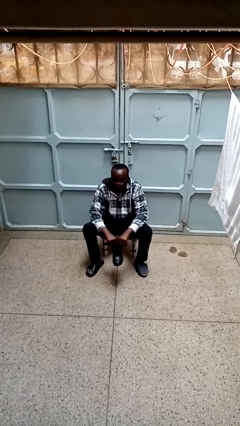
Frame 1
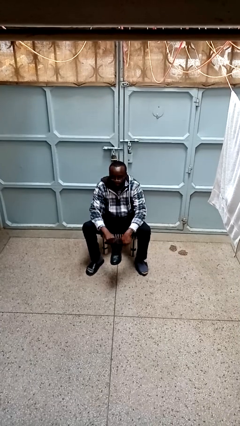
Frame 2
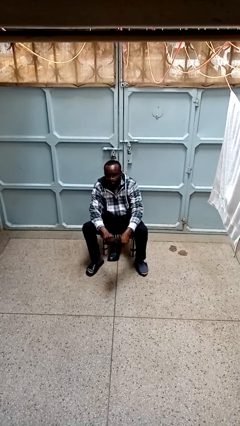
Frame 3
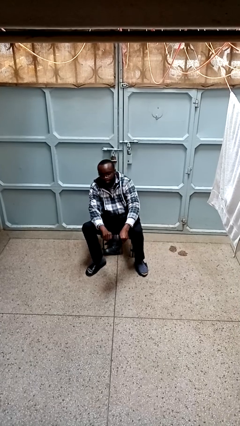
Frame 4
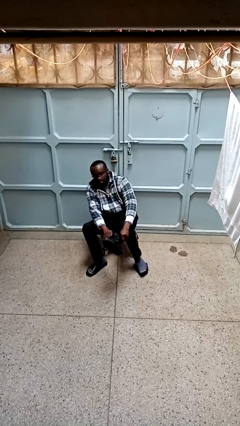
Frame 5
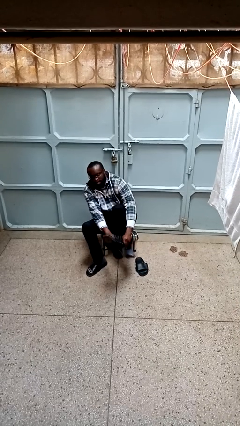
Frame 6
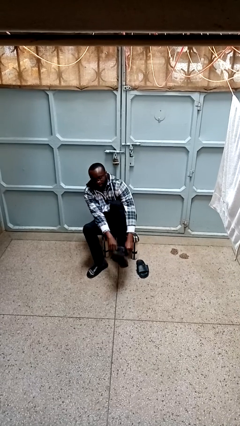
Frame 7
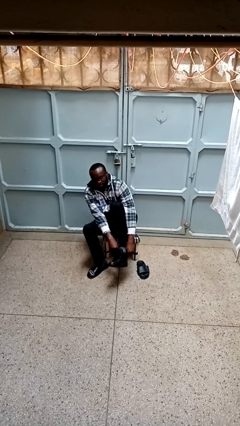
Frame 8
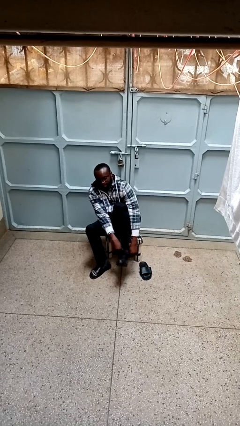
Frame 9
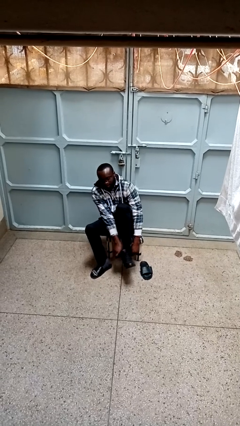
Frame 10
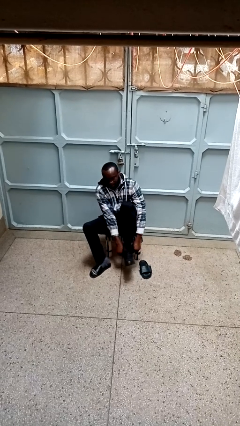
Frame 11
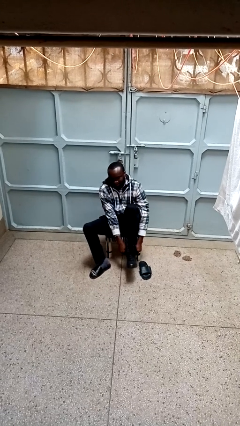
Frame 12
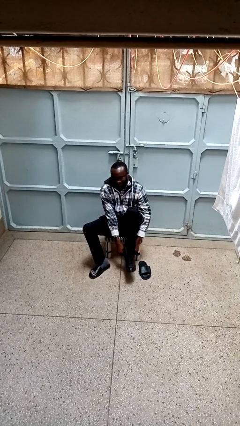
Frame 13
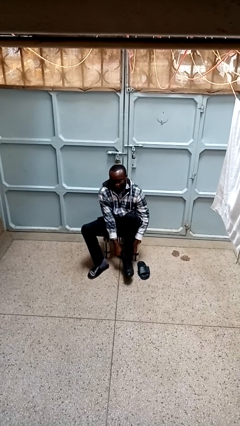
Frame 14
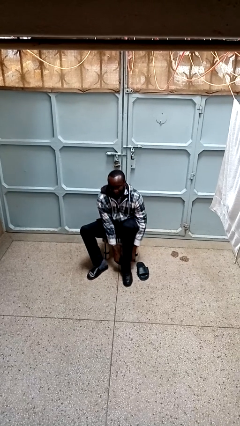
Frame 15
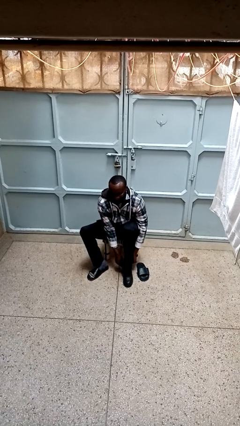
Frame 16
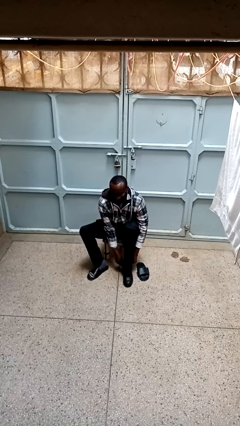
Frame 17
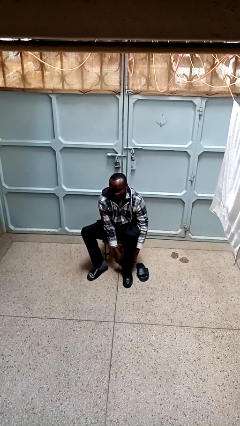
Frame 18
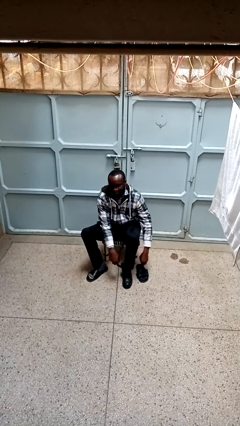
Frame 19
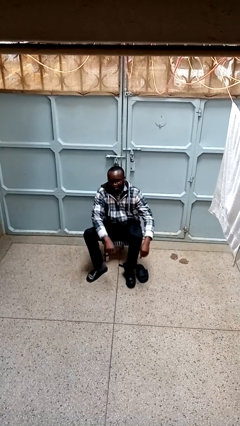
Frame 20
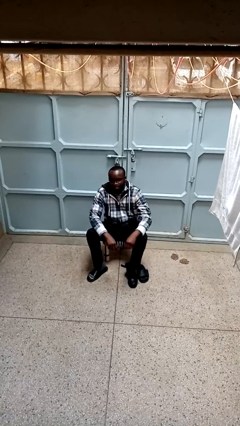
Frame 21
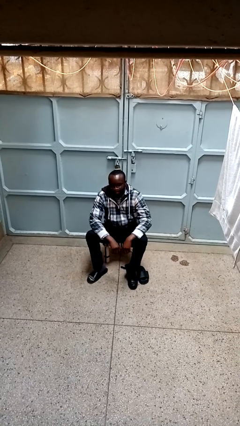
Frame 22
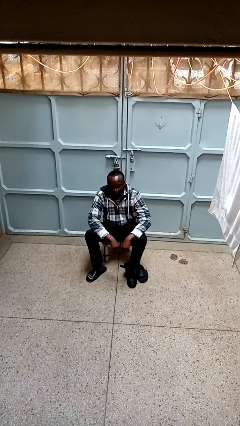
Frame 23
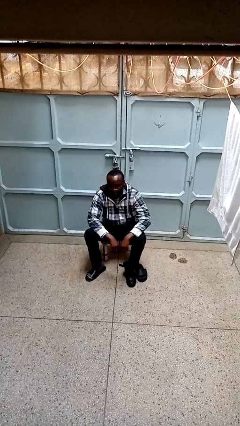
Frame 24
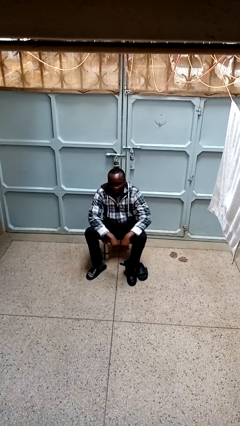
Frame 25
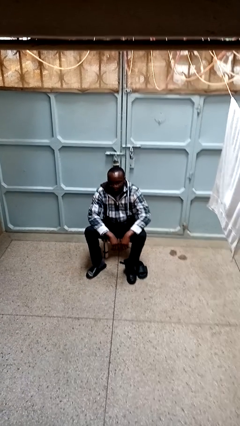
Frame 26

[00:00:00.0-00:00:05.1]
person puts on boots

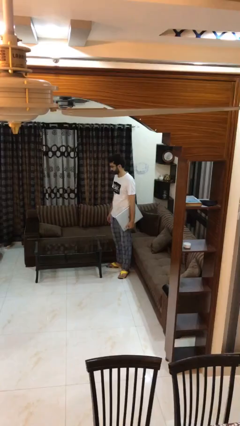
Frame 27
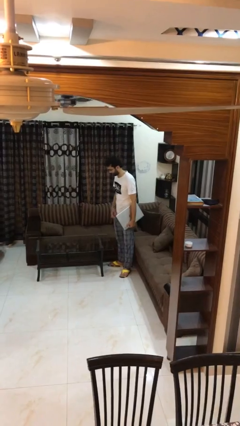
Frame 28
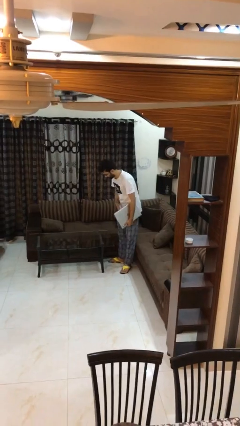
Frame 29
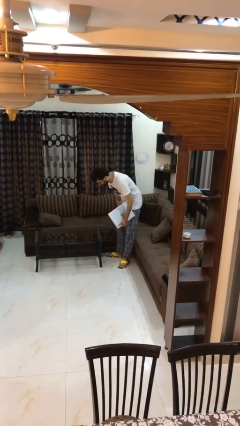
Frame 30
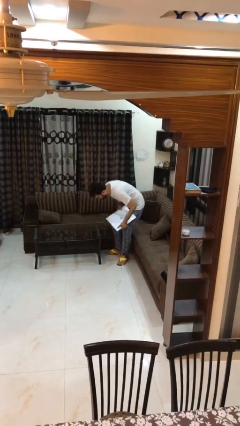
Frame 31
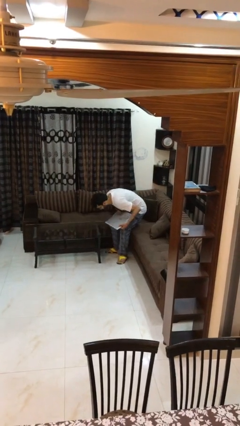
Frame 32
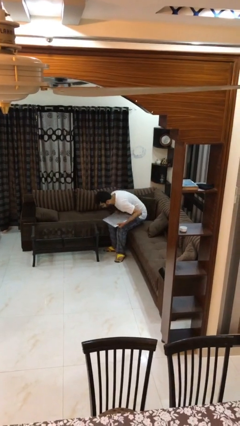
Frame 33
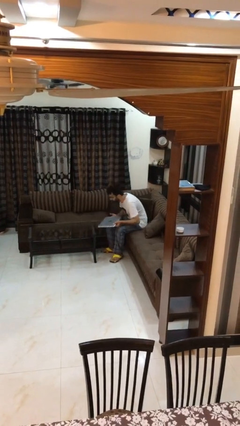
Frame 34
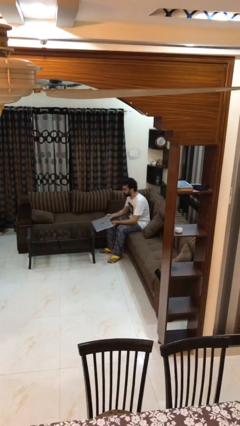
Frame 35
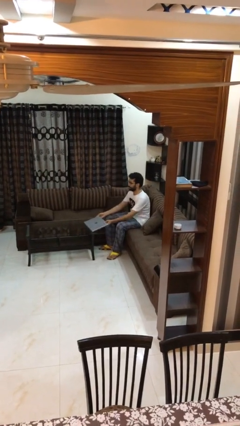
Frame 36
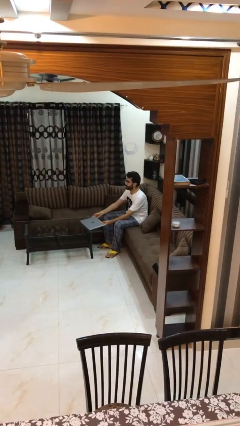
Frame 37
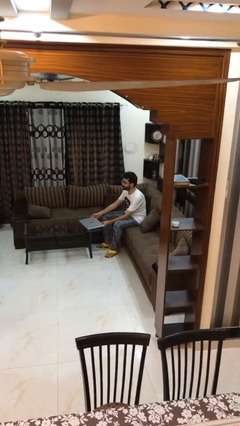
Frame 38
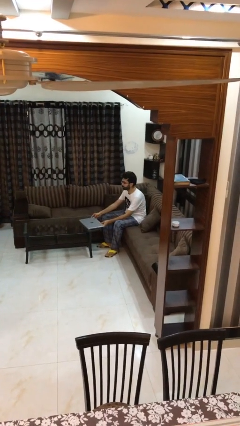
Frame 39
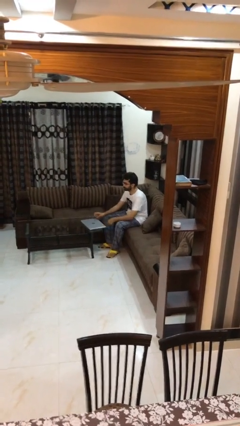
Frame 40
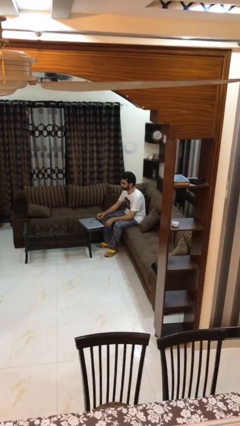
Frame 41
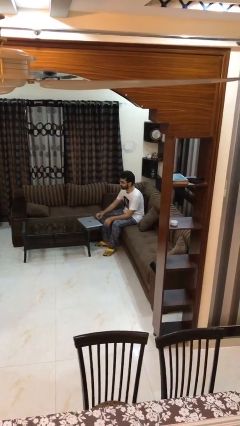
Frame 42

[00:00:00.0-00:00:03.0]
person sits down

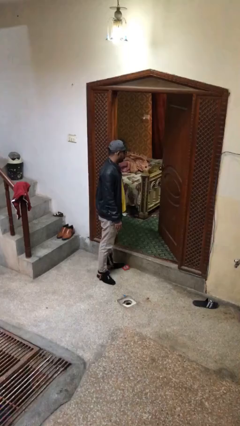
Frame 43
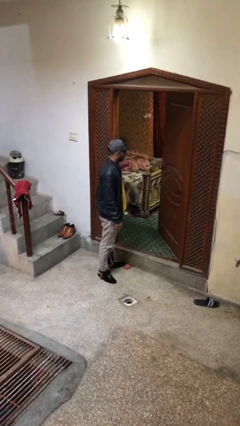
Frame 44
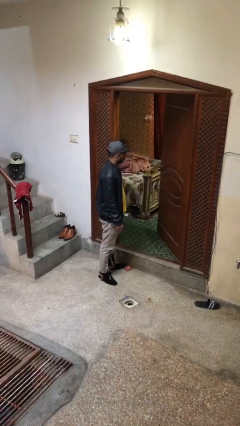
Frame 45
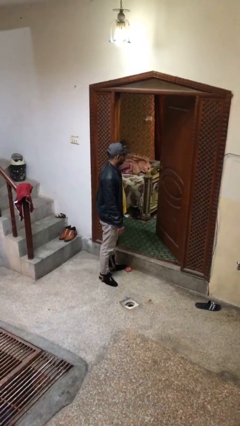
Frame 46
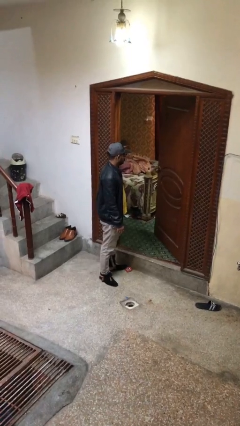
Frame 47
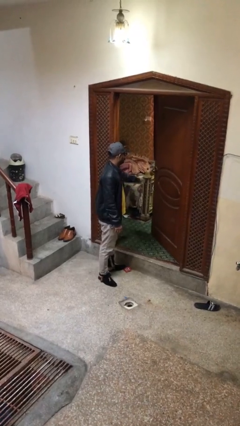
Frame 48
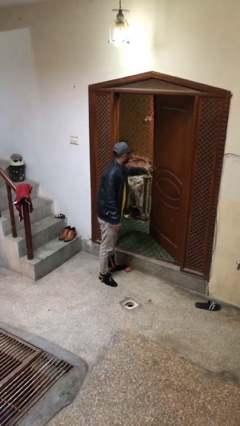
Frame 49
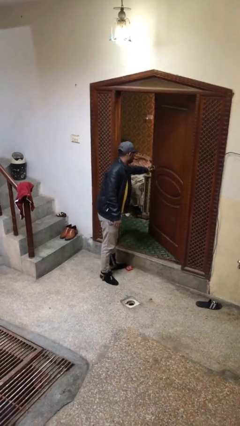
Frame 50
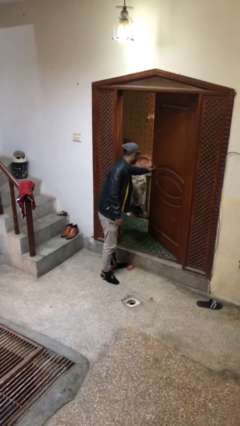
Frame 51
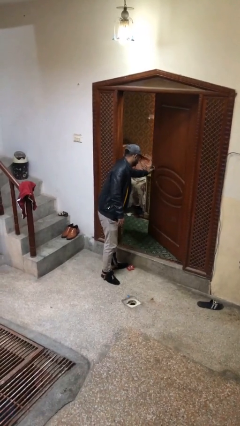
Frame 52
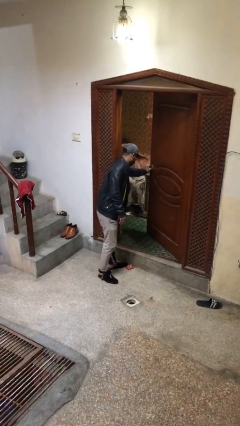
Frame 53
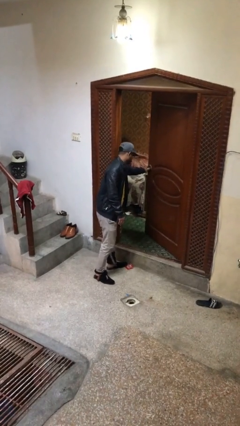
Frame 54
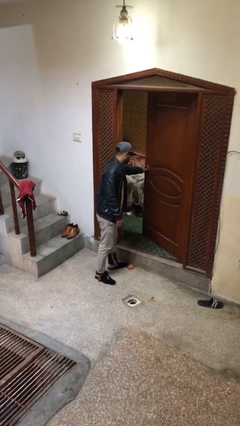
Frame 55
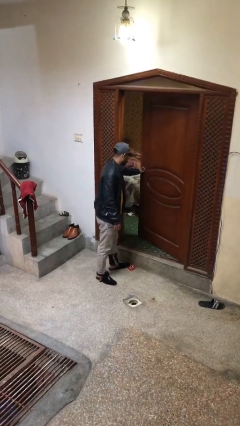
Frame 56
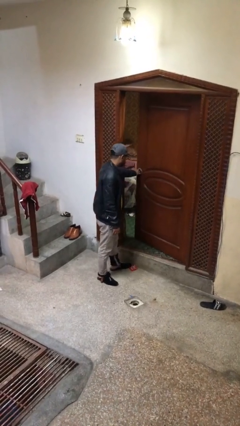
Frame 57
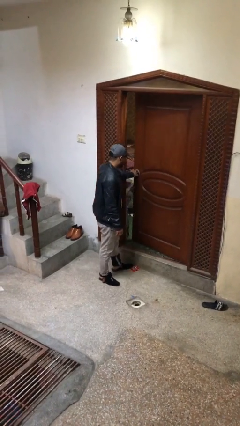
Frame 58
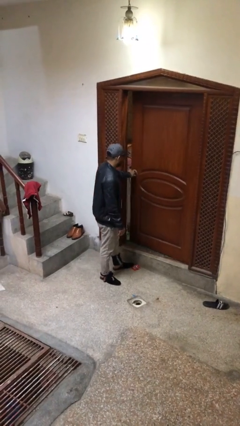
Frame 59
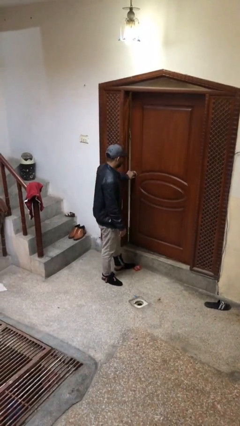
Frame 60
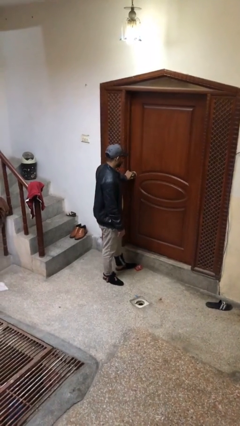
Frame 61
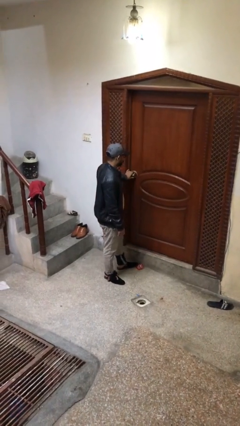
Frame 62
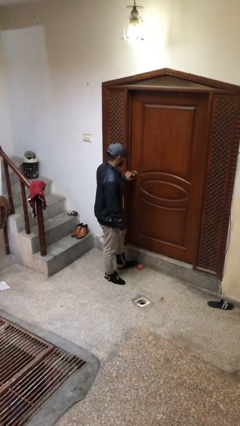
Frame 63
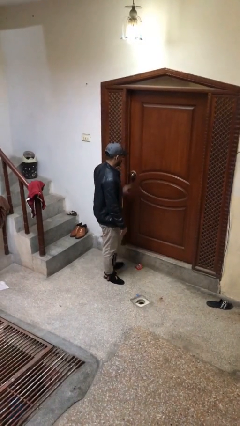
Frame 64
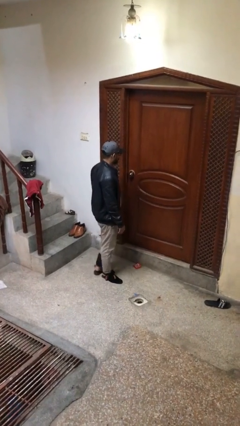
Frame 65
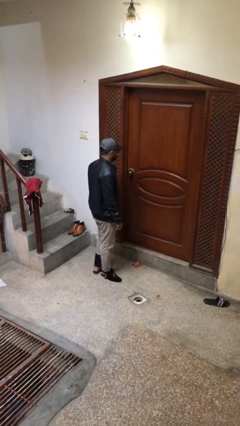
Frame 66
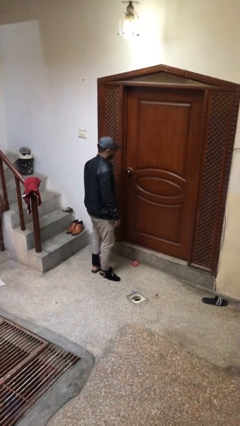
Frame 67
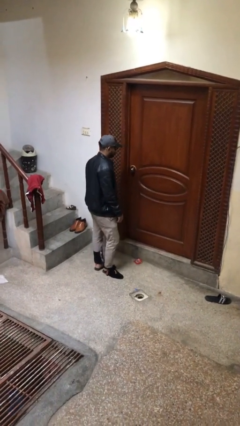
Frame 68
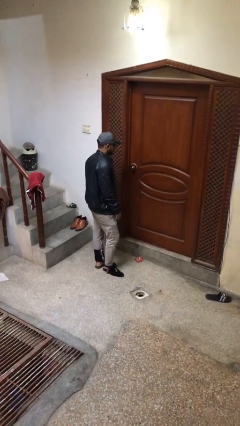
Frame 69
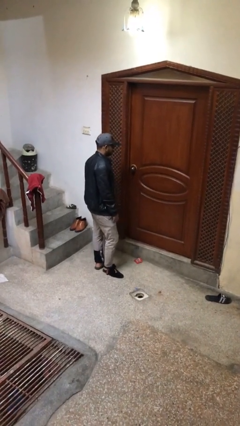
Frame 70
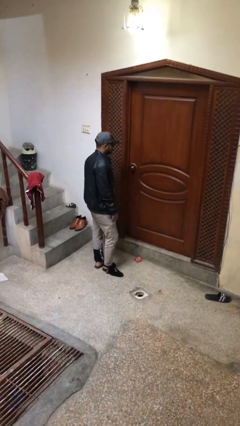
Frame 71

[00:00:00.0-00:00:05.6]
person closes facility door

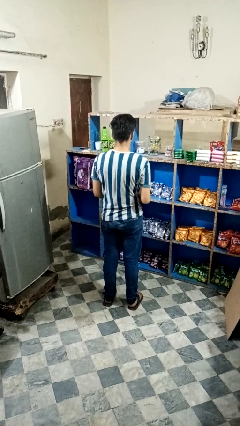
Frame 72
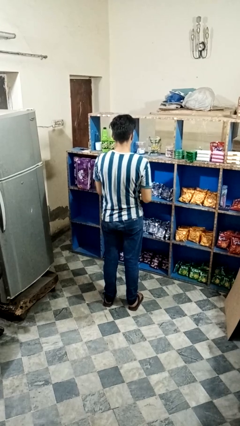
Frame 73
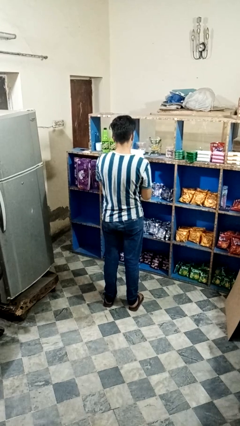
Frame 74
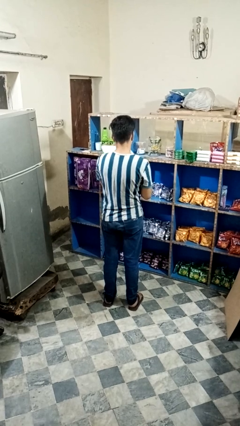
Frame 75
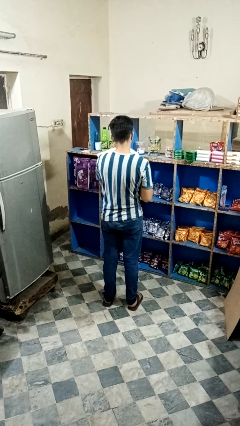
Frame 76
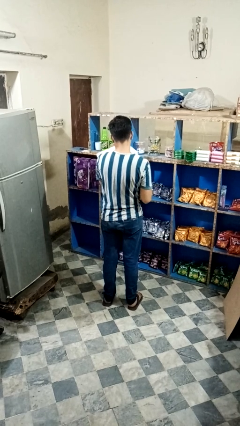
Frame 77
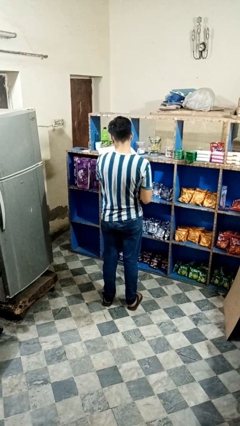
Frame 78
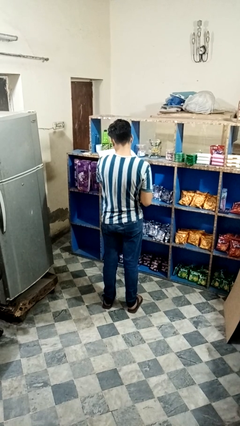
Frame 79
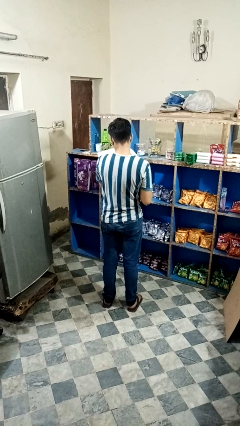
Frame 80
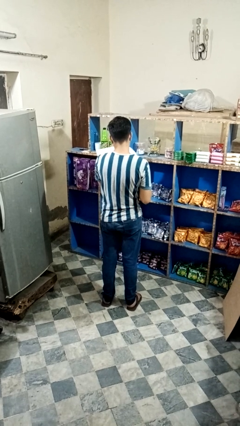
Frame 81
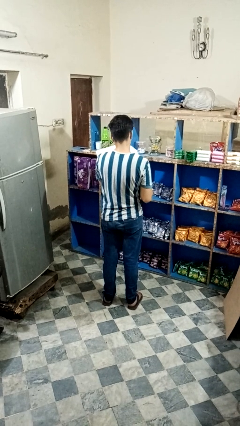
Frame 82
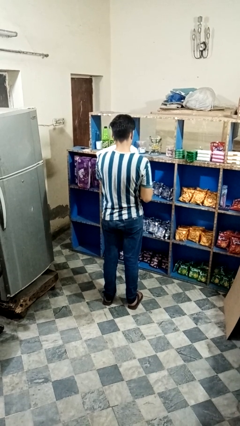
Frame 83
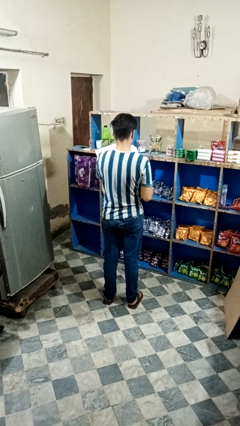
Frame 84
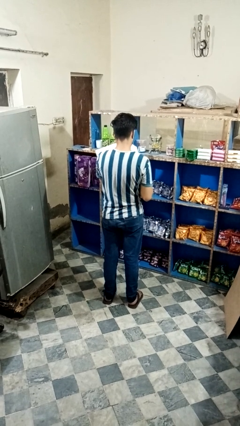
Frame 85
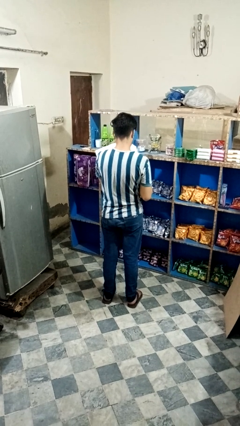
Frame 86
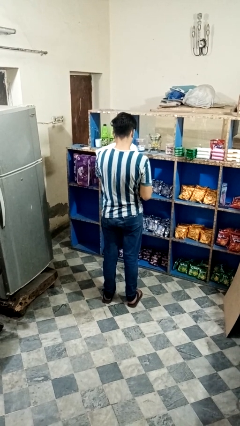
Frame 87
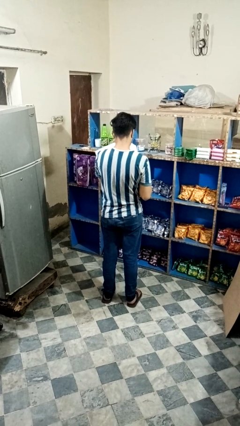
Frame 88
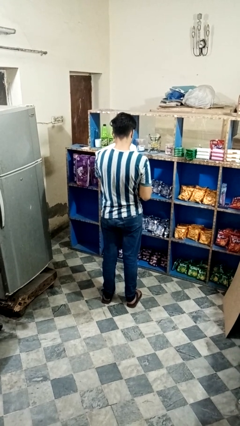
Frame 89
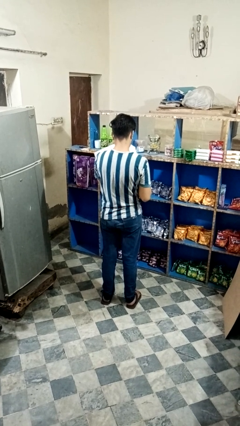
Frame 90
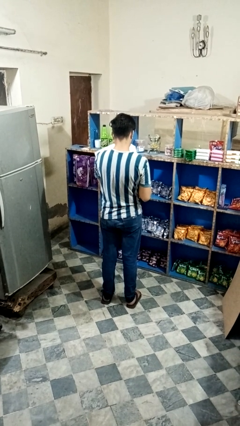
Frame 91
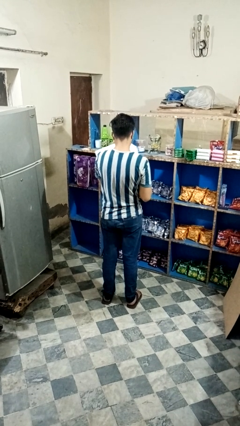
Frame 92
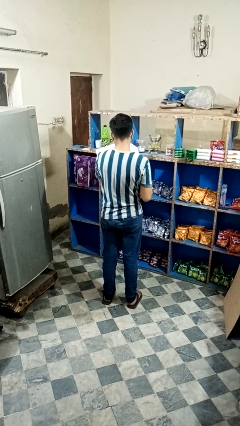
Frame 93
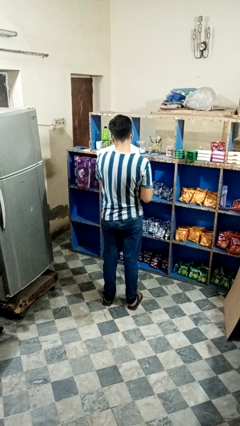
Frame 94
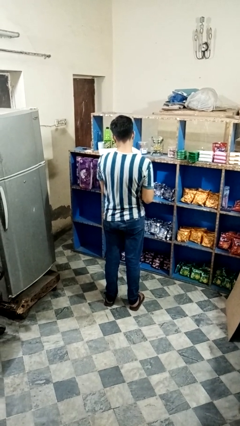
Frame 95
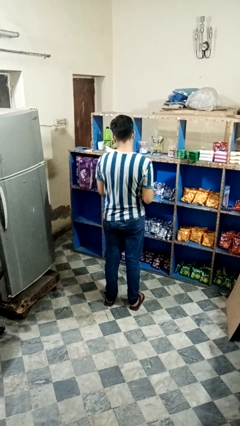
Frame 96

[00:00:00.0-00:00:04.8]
person reads magazine
